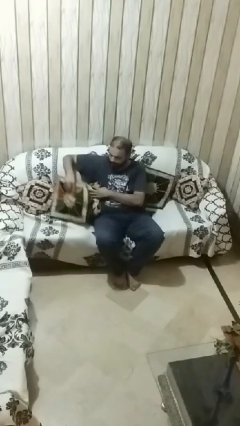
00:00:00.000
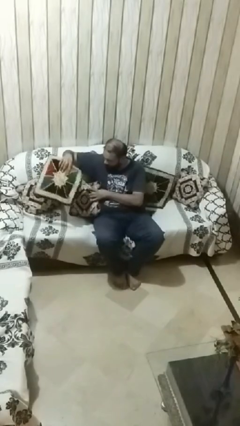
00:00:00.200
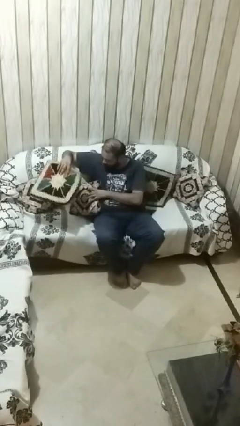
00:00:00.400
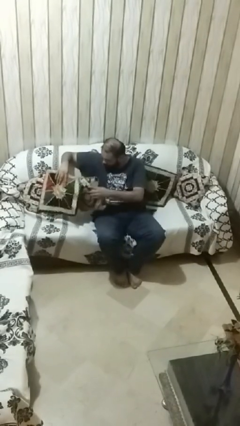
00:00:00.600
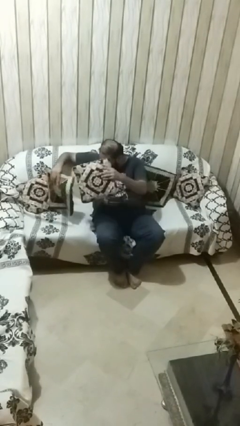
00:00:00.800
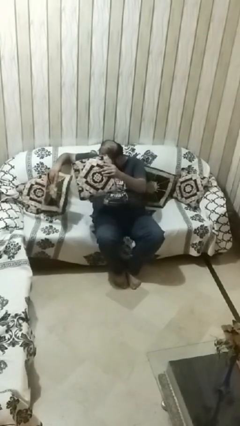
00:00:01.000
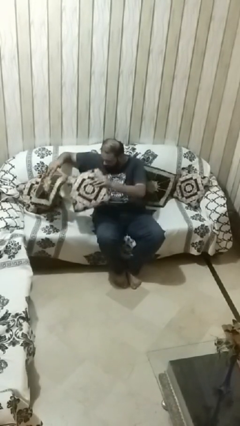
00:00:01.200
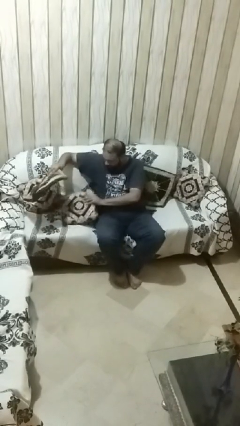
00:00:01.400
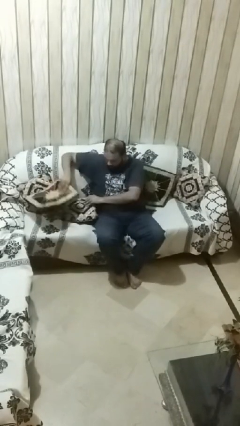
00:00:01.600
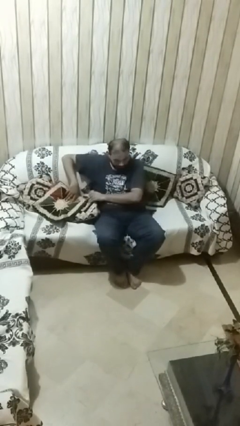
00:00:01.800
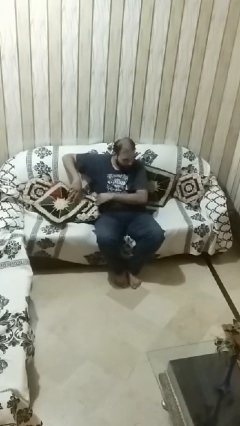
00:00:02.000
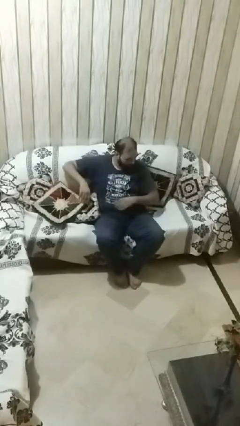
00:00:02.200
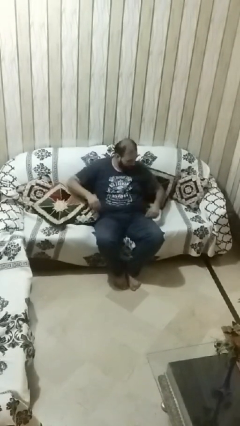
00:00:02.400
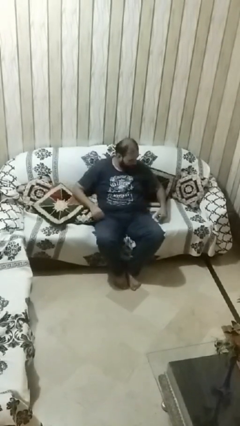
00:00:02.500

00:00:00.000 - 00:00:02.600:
person searches in couch

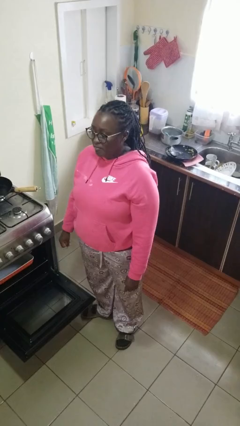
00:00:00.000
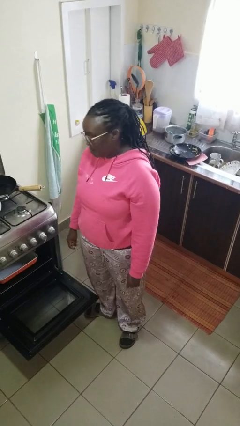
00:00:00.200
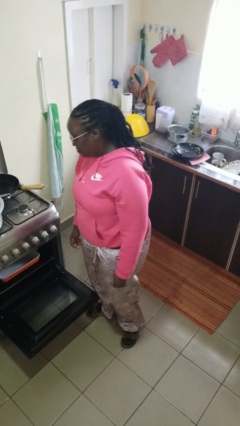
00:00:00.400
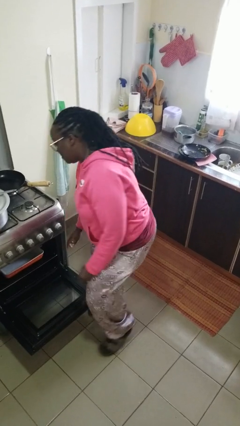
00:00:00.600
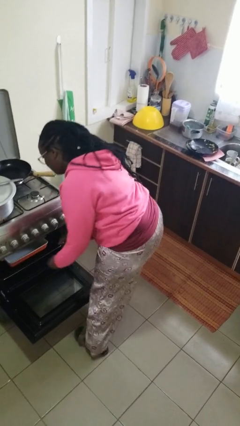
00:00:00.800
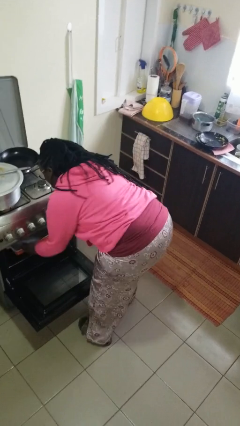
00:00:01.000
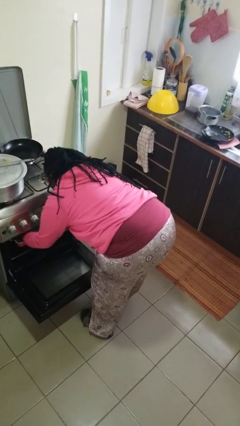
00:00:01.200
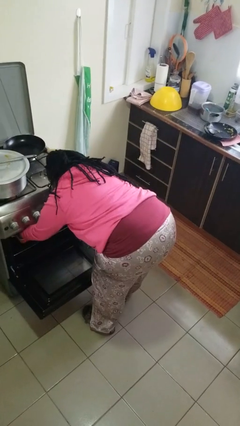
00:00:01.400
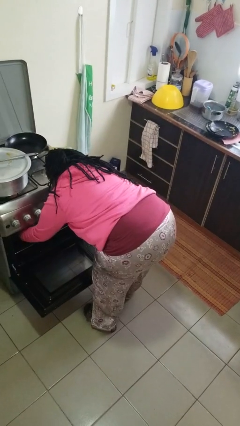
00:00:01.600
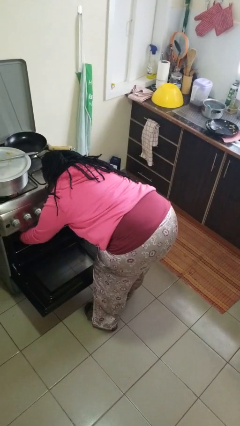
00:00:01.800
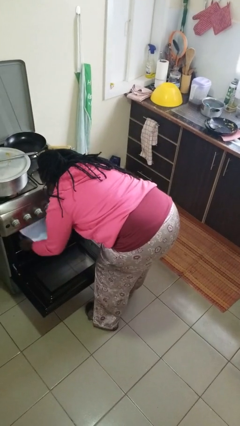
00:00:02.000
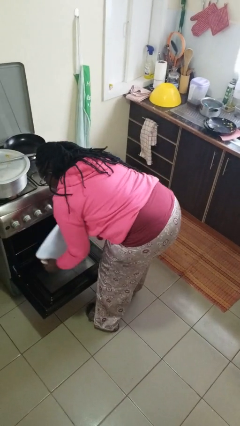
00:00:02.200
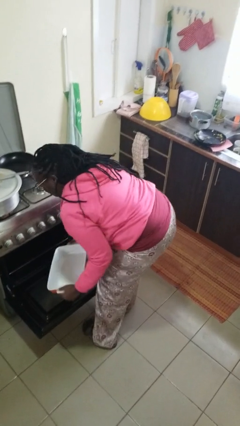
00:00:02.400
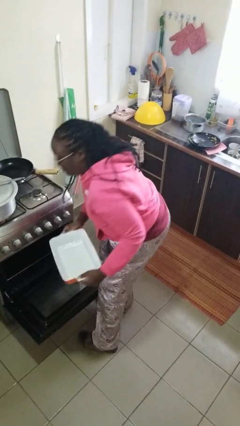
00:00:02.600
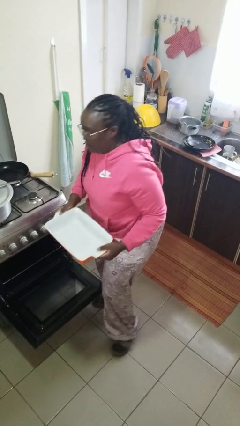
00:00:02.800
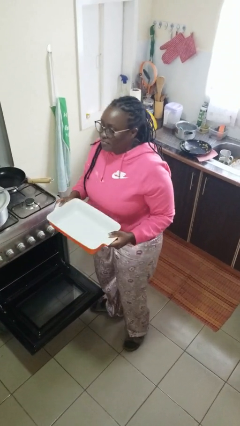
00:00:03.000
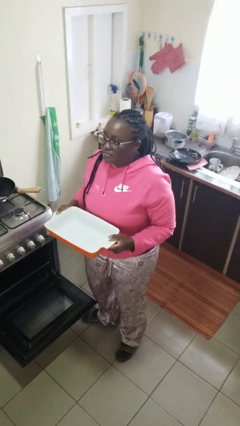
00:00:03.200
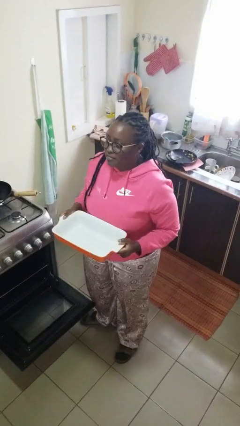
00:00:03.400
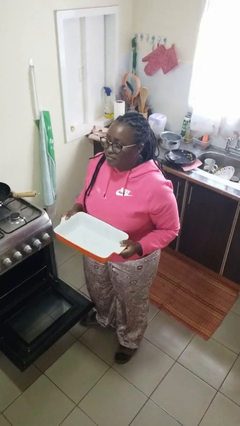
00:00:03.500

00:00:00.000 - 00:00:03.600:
person takes object from oven

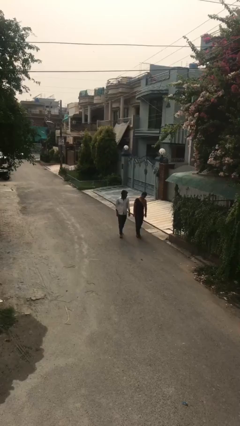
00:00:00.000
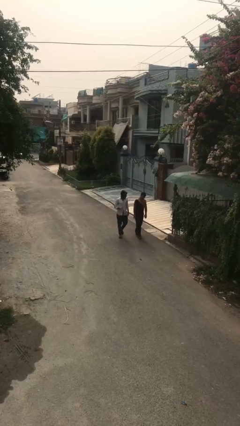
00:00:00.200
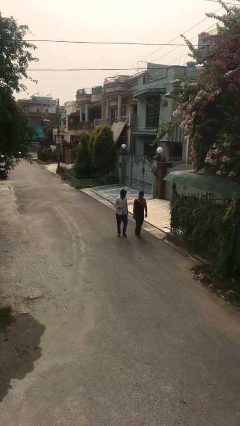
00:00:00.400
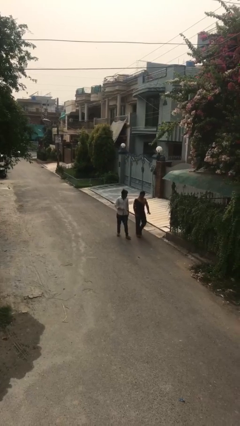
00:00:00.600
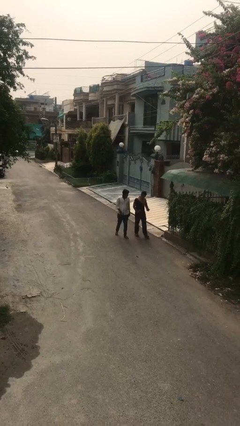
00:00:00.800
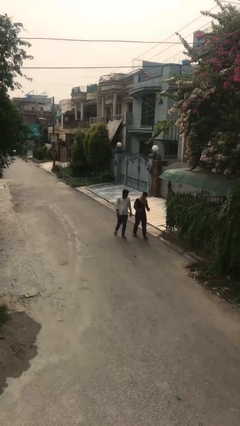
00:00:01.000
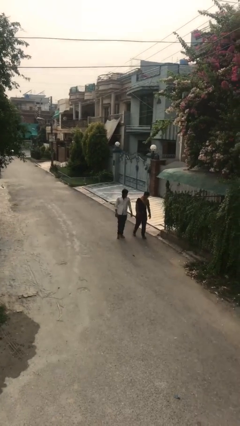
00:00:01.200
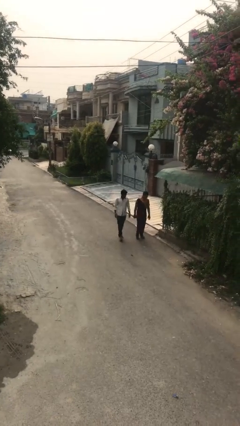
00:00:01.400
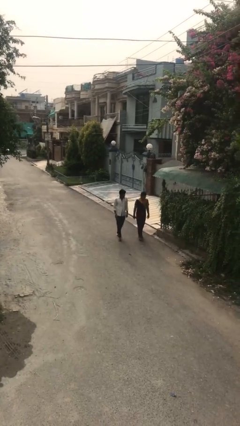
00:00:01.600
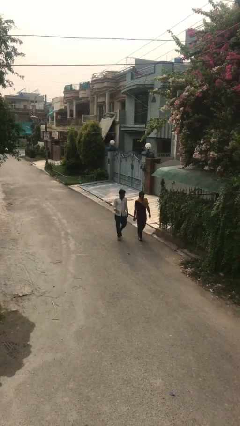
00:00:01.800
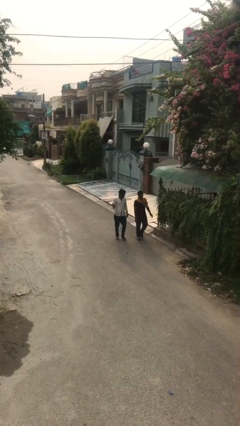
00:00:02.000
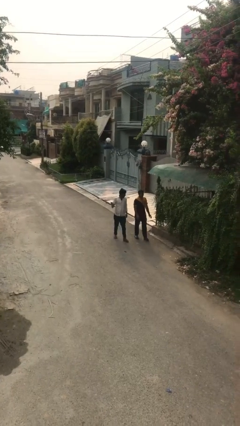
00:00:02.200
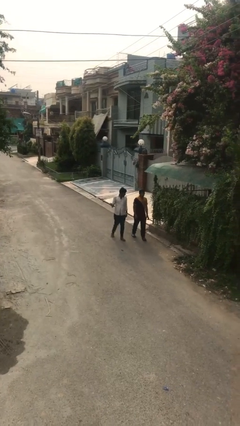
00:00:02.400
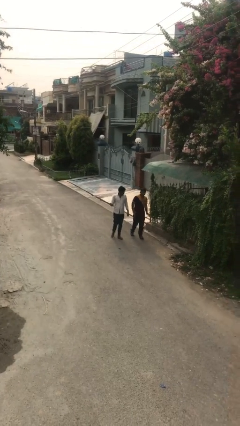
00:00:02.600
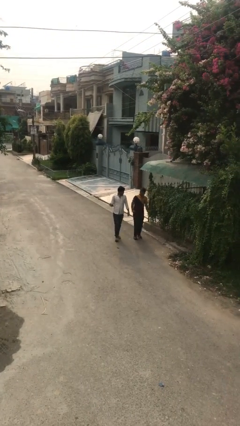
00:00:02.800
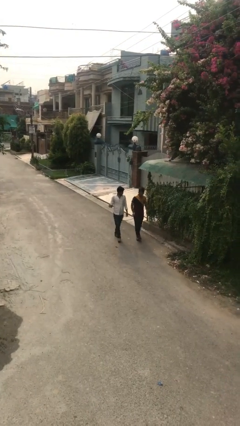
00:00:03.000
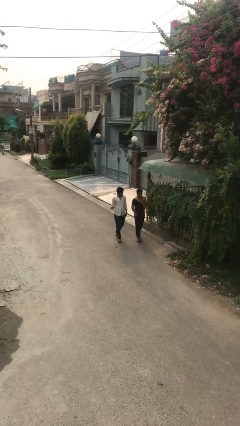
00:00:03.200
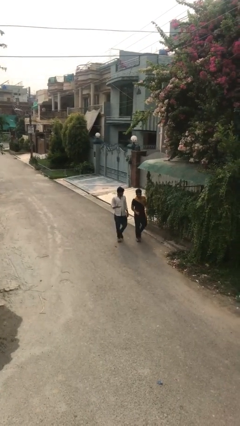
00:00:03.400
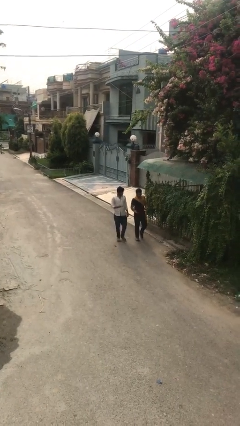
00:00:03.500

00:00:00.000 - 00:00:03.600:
person talks to person

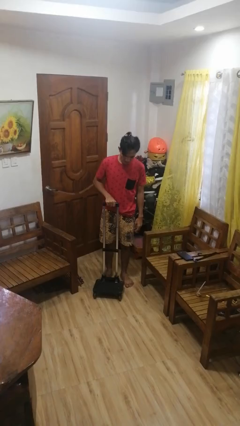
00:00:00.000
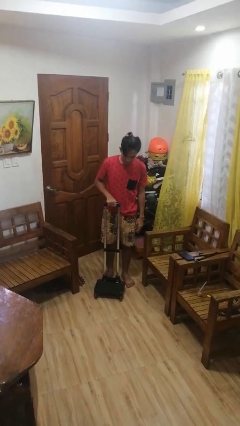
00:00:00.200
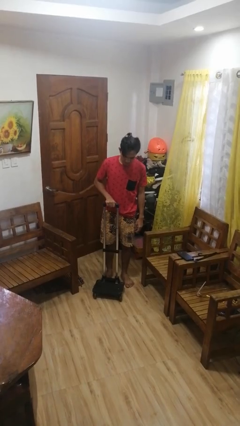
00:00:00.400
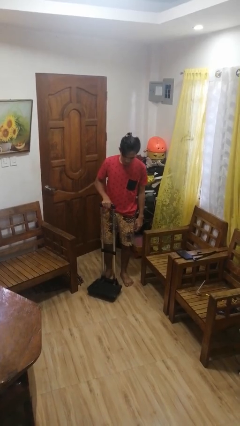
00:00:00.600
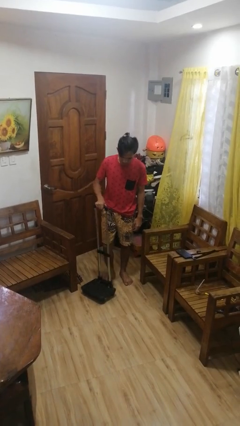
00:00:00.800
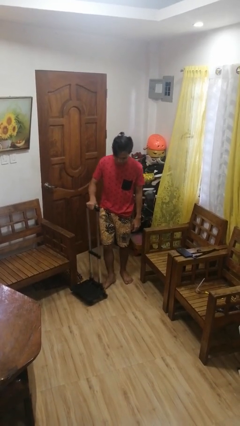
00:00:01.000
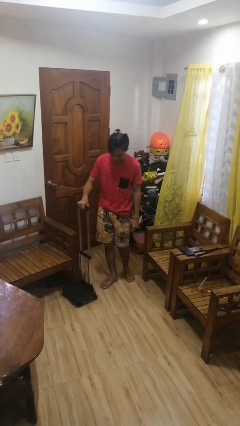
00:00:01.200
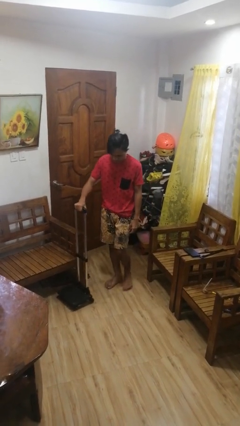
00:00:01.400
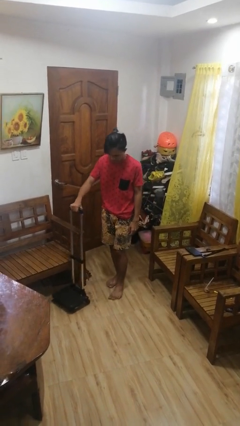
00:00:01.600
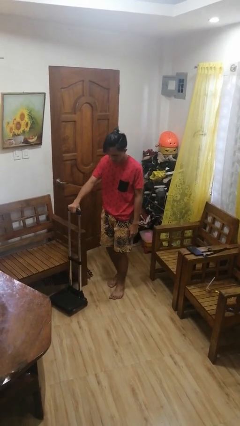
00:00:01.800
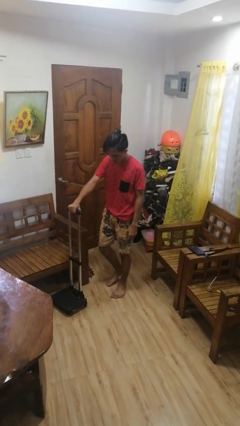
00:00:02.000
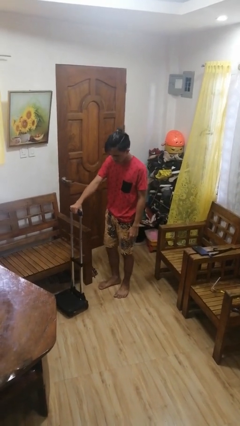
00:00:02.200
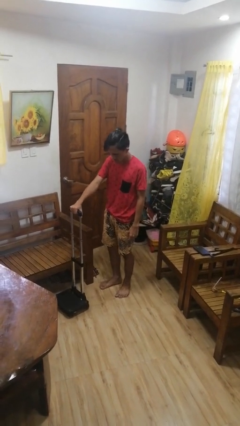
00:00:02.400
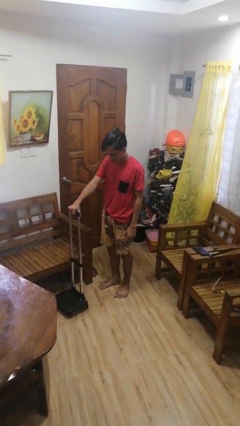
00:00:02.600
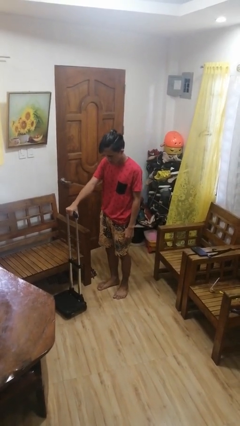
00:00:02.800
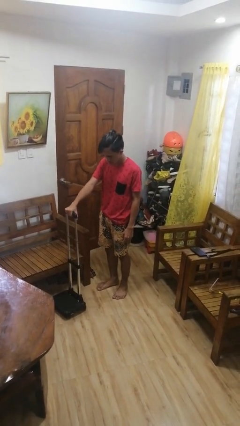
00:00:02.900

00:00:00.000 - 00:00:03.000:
person pushes wheeled cart

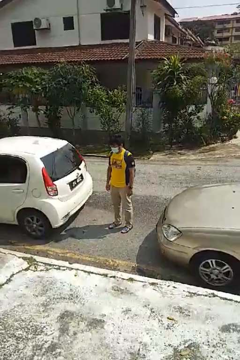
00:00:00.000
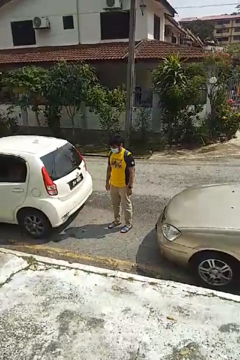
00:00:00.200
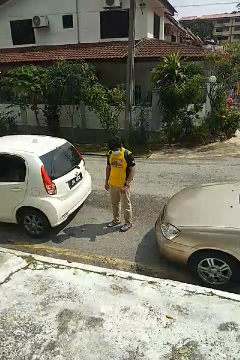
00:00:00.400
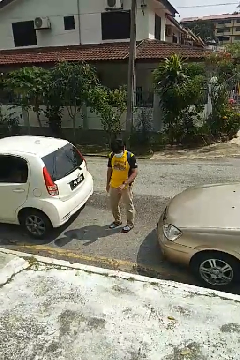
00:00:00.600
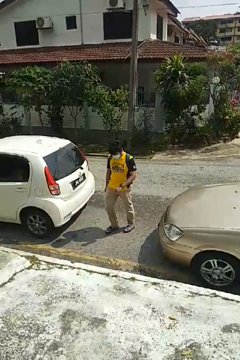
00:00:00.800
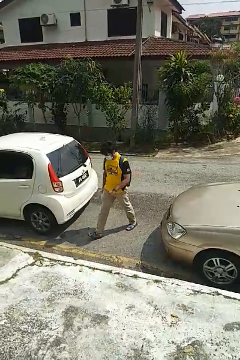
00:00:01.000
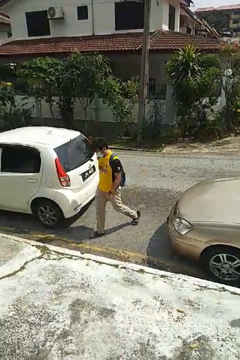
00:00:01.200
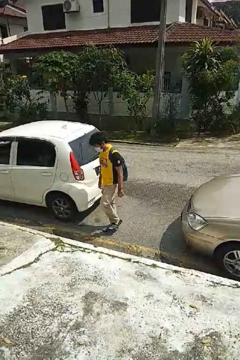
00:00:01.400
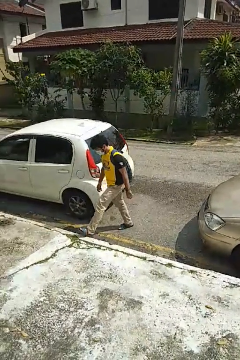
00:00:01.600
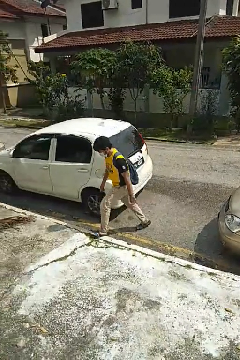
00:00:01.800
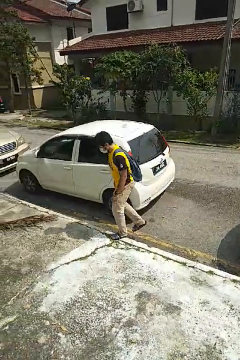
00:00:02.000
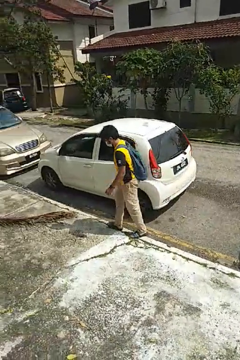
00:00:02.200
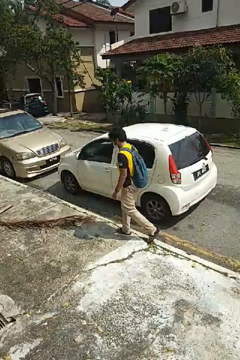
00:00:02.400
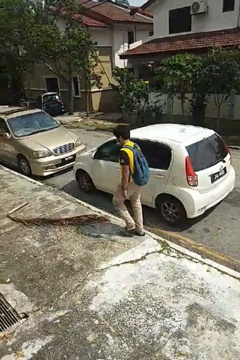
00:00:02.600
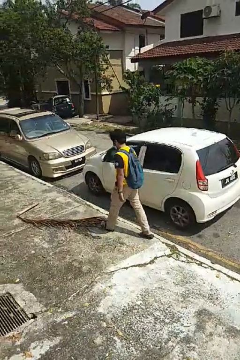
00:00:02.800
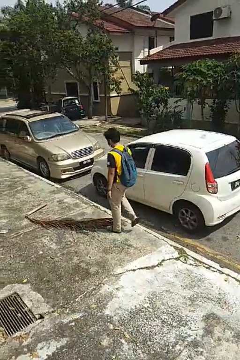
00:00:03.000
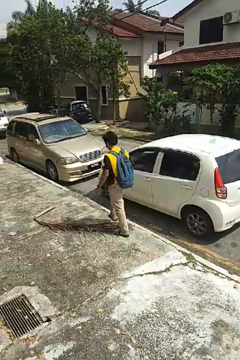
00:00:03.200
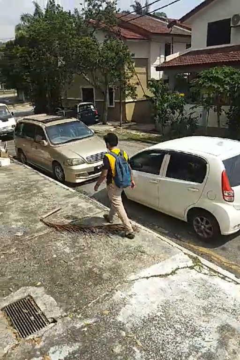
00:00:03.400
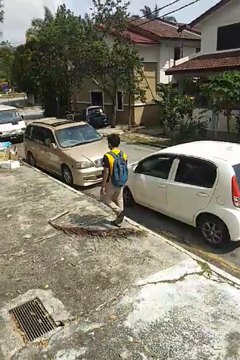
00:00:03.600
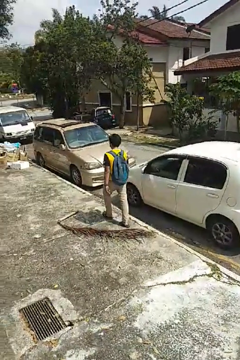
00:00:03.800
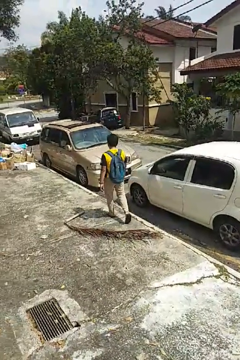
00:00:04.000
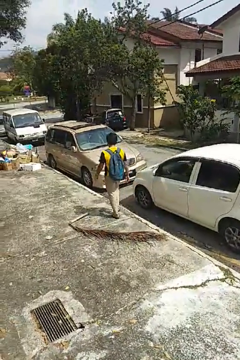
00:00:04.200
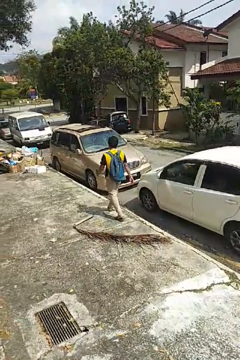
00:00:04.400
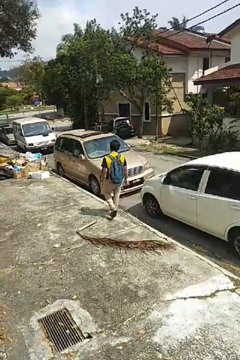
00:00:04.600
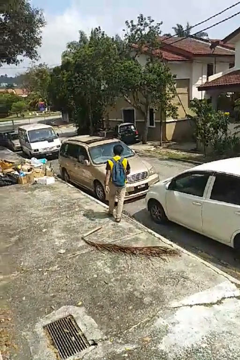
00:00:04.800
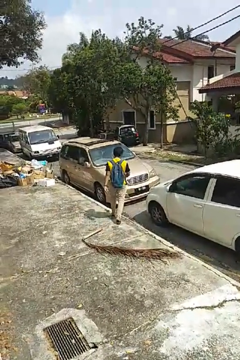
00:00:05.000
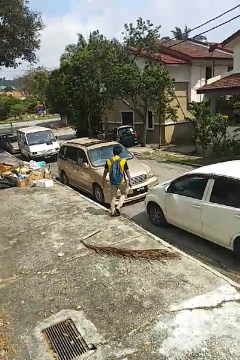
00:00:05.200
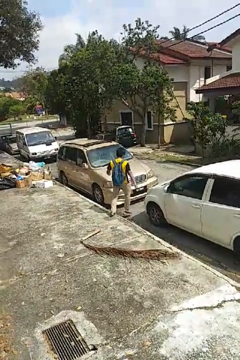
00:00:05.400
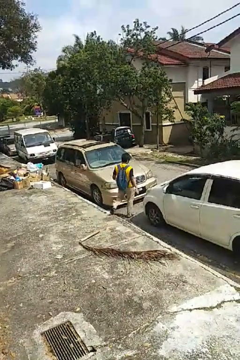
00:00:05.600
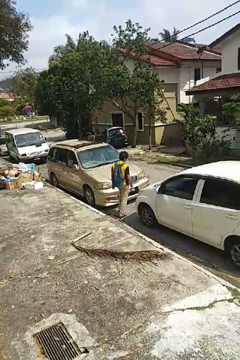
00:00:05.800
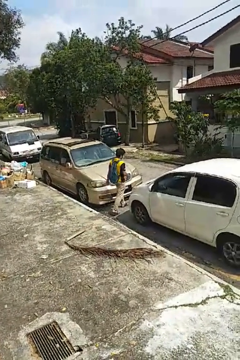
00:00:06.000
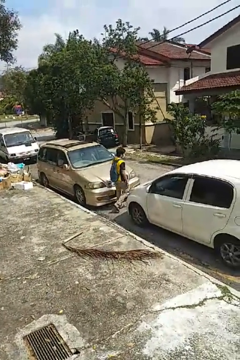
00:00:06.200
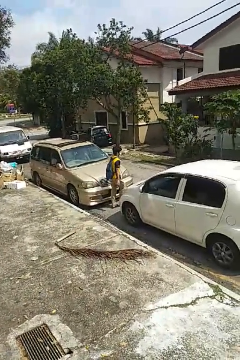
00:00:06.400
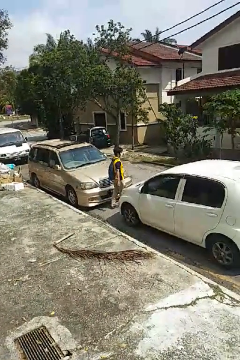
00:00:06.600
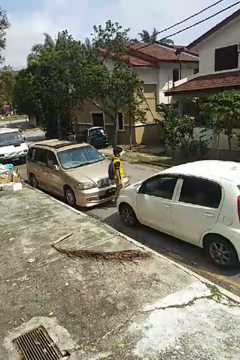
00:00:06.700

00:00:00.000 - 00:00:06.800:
person walks around car
